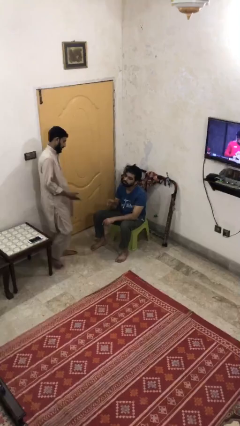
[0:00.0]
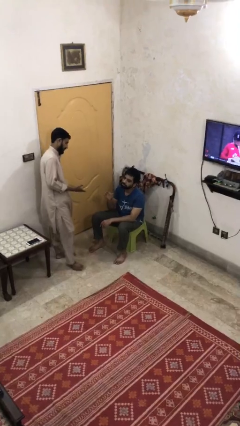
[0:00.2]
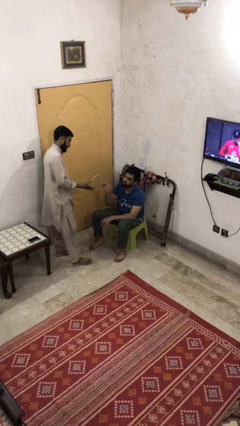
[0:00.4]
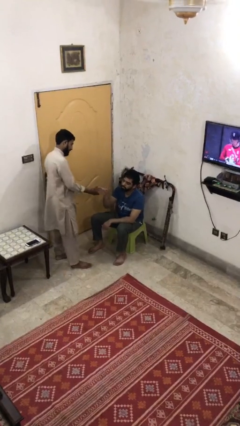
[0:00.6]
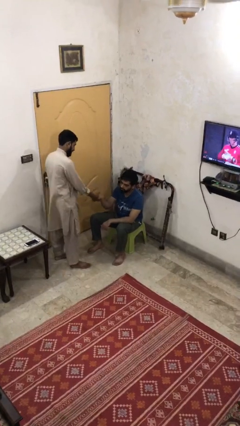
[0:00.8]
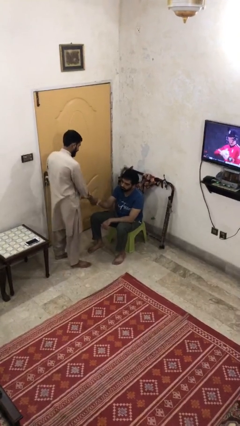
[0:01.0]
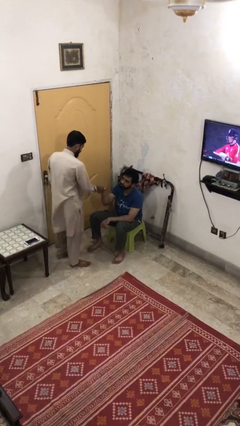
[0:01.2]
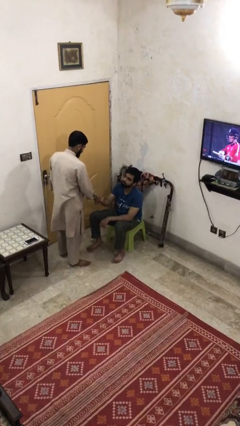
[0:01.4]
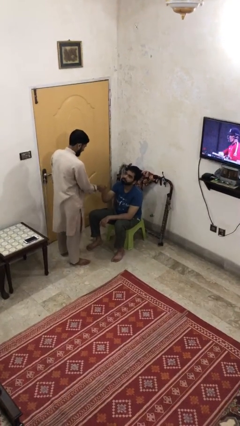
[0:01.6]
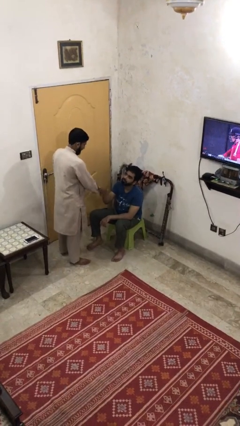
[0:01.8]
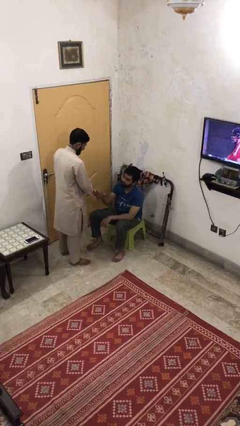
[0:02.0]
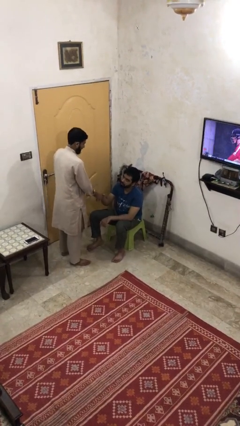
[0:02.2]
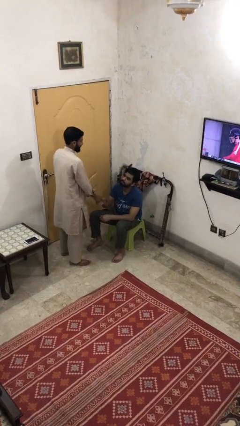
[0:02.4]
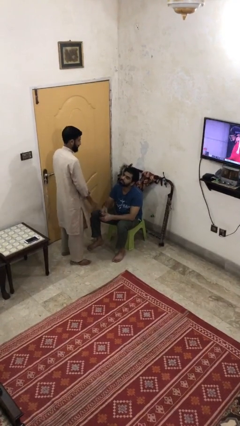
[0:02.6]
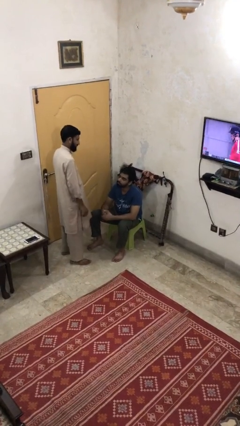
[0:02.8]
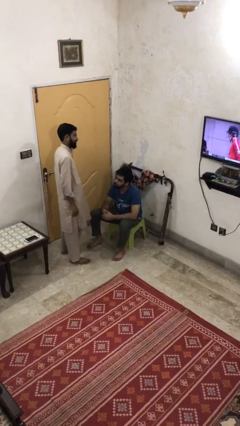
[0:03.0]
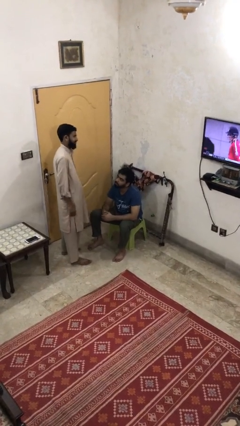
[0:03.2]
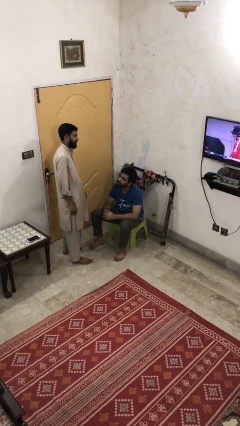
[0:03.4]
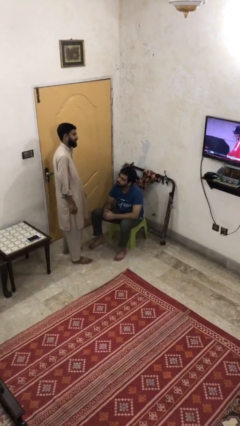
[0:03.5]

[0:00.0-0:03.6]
person shakes hand

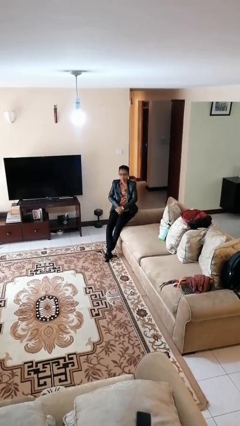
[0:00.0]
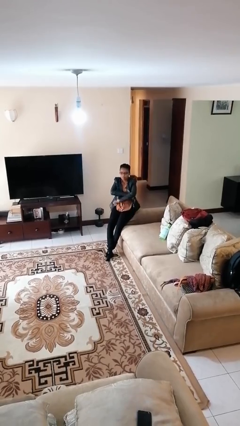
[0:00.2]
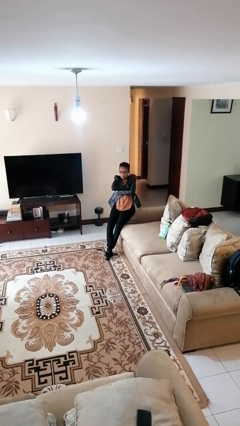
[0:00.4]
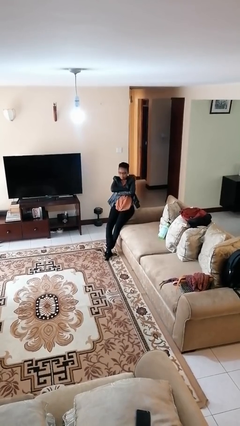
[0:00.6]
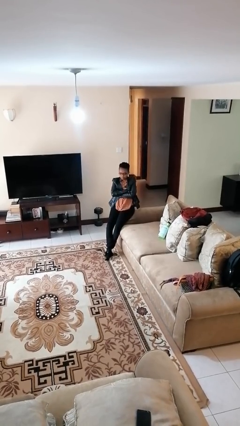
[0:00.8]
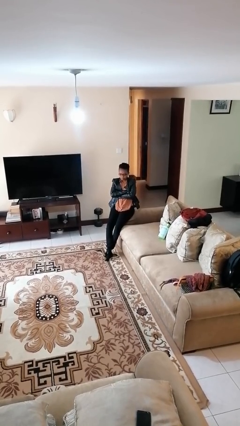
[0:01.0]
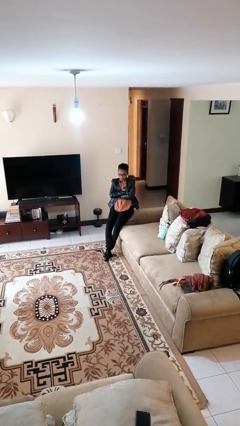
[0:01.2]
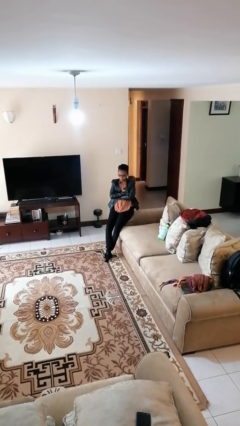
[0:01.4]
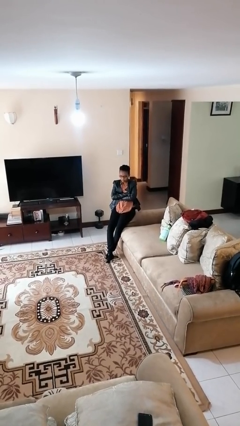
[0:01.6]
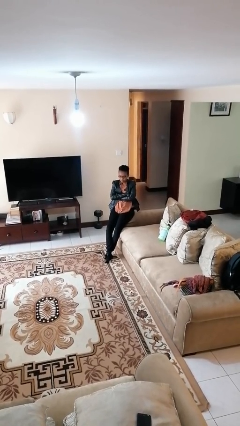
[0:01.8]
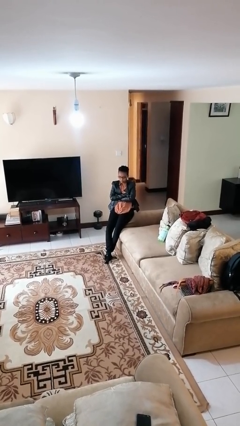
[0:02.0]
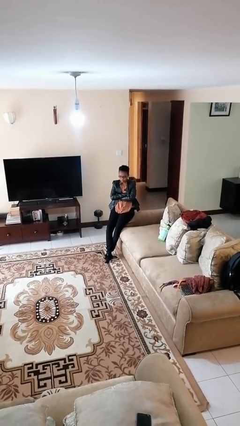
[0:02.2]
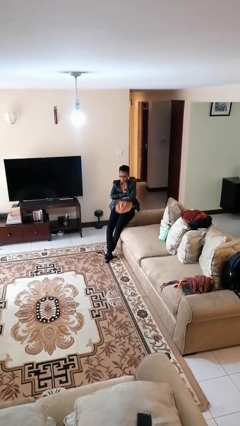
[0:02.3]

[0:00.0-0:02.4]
person crosses arms

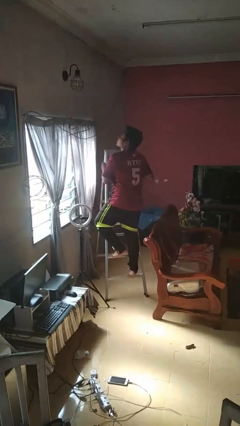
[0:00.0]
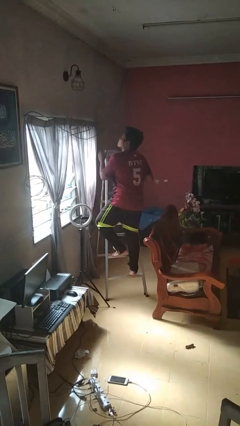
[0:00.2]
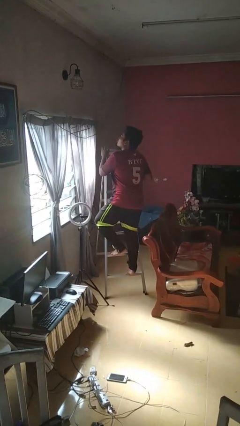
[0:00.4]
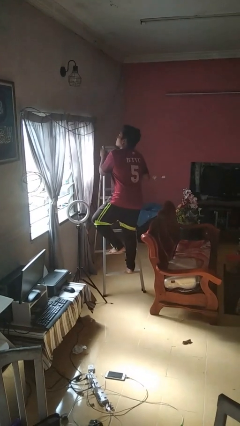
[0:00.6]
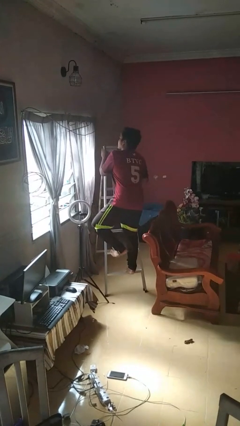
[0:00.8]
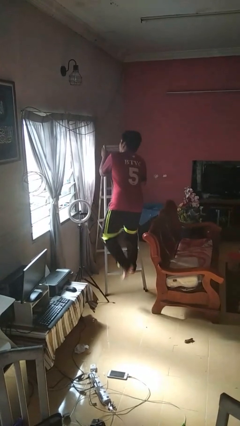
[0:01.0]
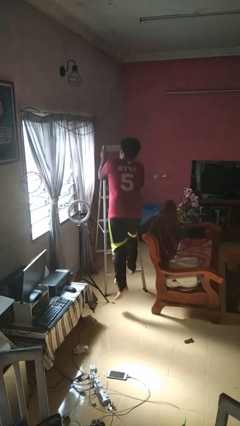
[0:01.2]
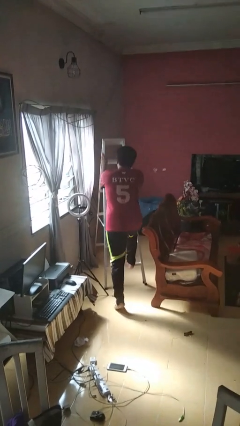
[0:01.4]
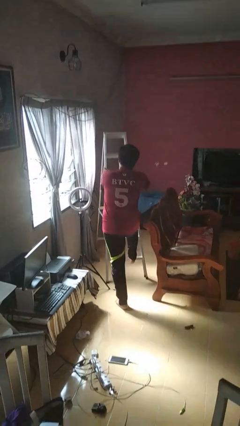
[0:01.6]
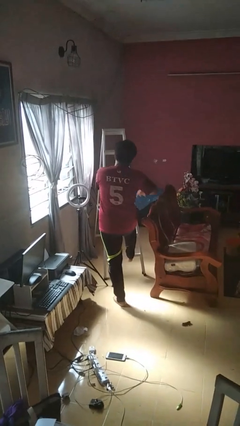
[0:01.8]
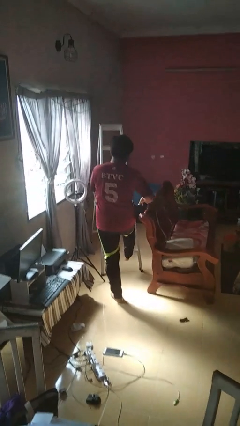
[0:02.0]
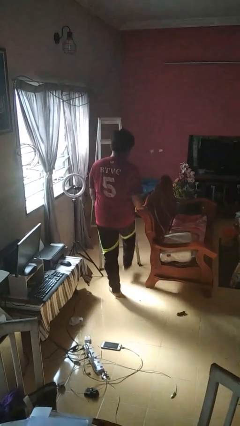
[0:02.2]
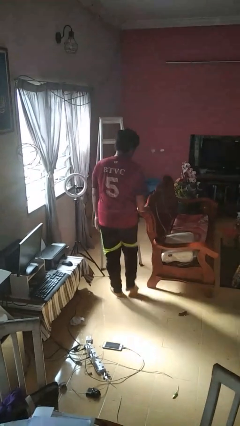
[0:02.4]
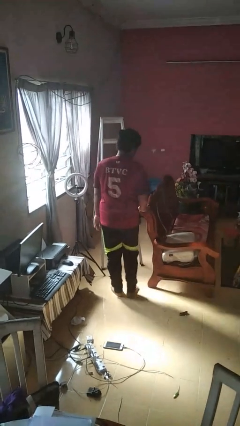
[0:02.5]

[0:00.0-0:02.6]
person climbs down ladder

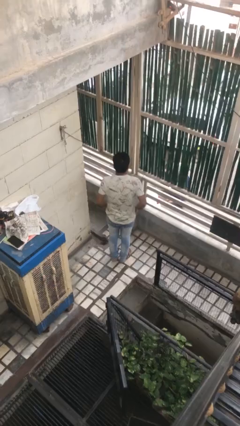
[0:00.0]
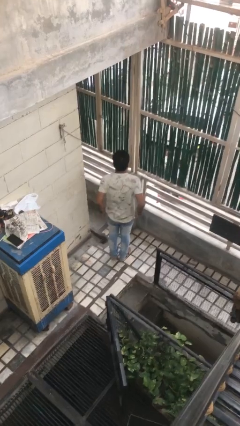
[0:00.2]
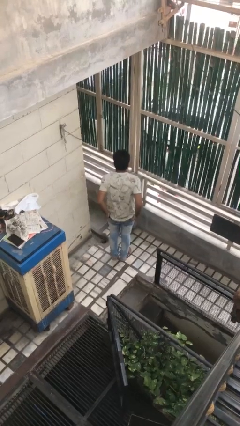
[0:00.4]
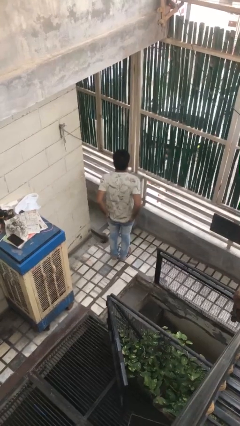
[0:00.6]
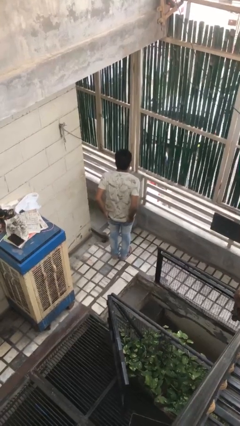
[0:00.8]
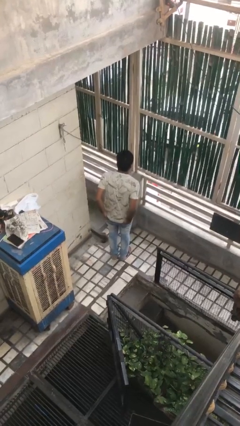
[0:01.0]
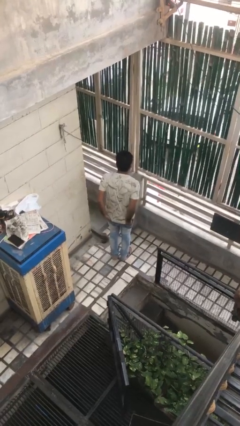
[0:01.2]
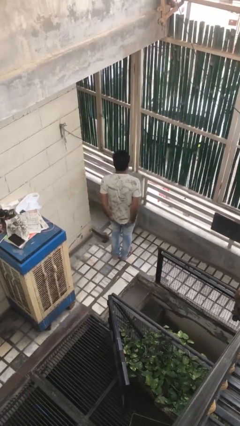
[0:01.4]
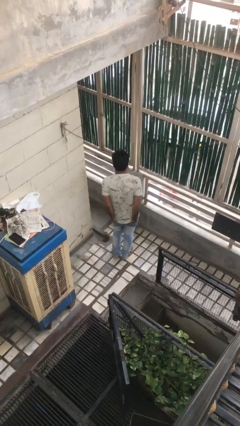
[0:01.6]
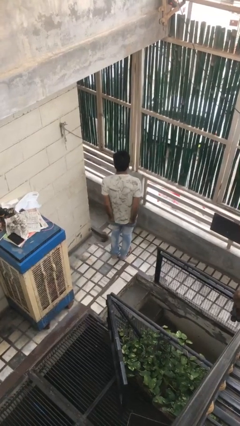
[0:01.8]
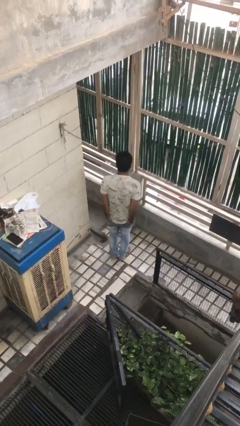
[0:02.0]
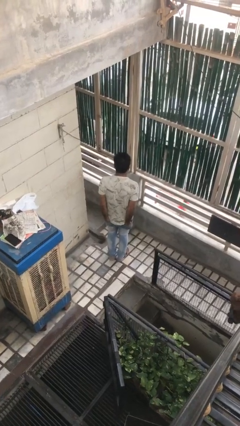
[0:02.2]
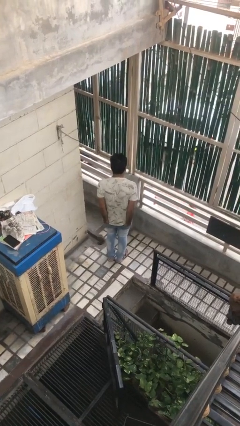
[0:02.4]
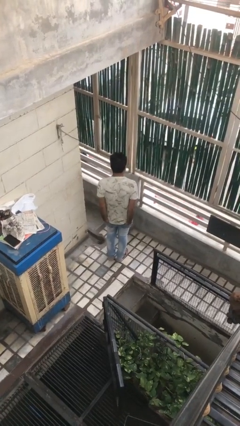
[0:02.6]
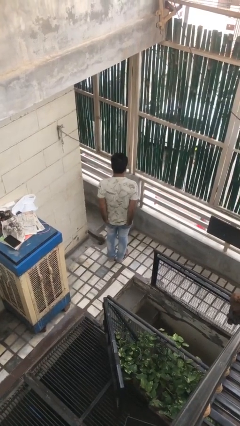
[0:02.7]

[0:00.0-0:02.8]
person puts hands in back pockets

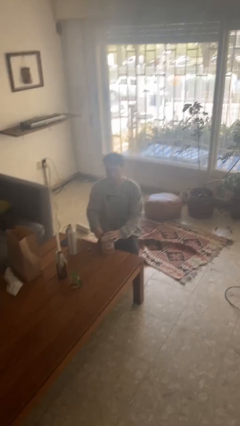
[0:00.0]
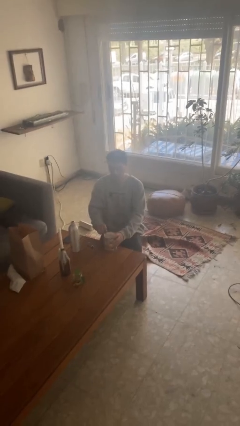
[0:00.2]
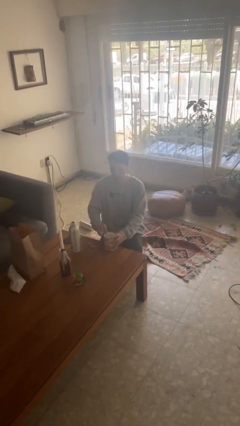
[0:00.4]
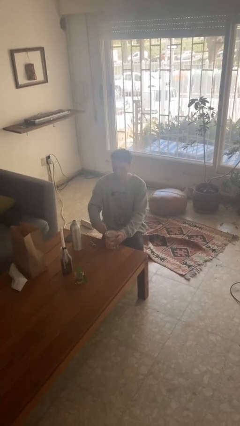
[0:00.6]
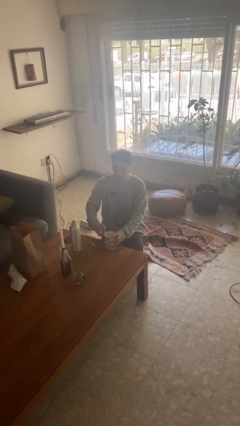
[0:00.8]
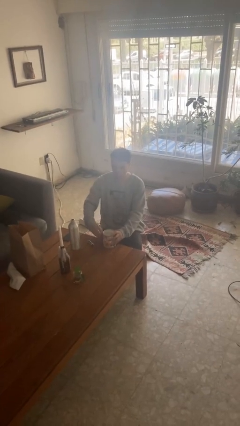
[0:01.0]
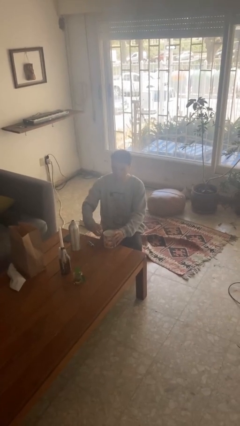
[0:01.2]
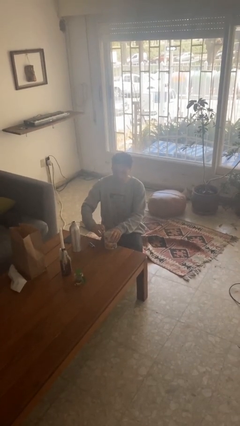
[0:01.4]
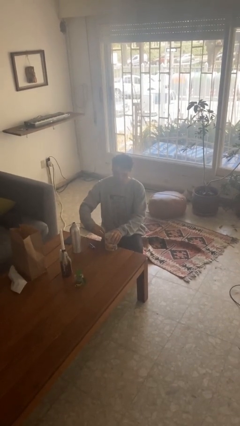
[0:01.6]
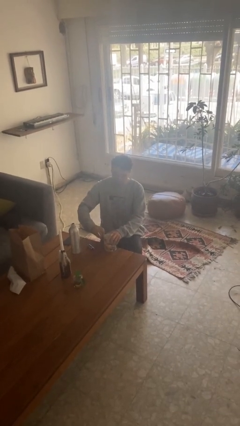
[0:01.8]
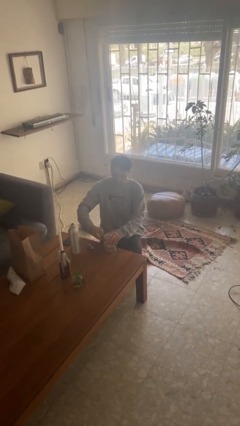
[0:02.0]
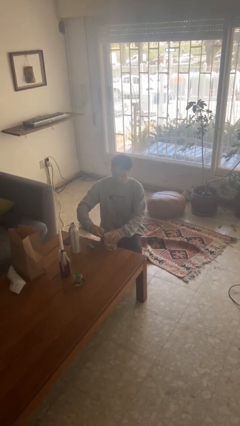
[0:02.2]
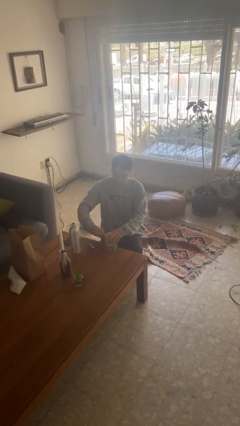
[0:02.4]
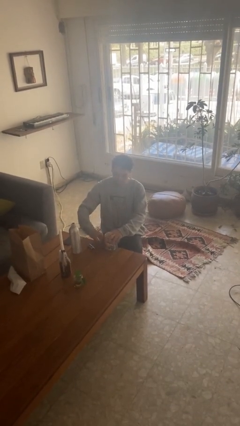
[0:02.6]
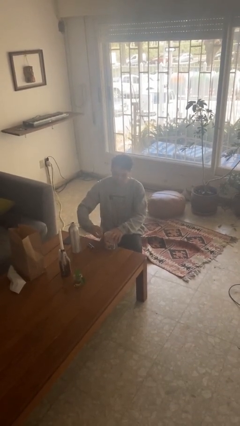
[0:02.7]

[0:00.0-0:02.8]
person opens can with can opener

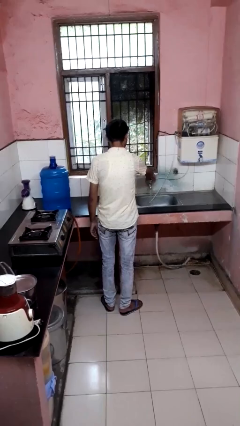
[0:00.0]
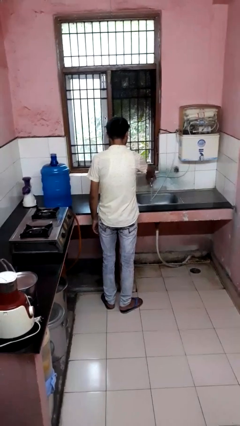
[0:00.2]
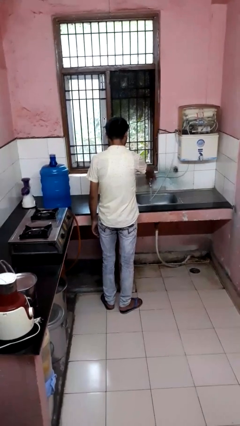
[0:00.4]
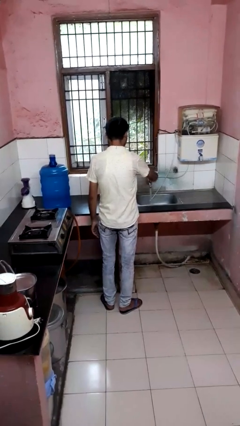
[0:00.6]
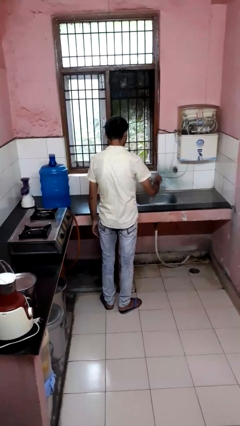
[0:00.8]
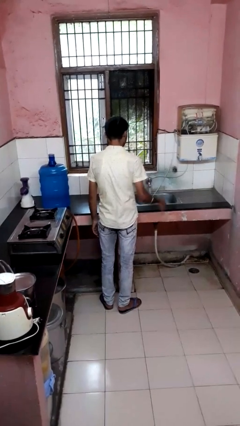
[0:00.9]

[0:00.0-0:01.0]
person turns on faucet

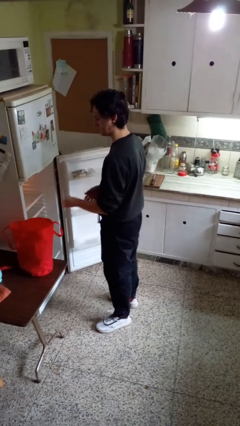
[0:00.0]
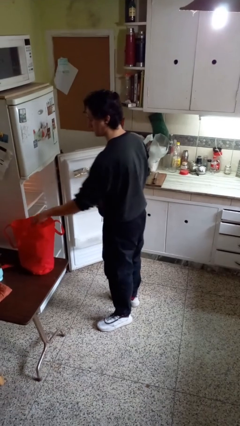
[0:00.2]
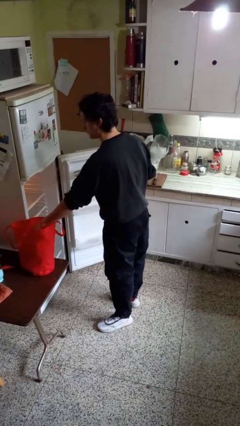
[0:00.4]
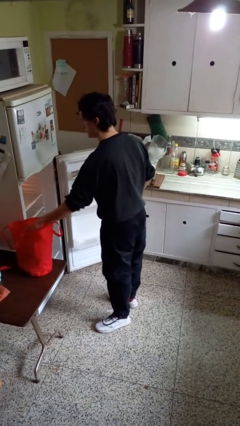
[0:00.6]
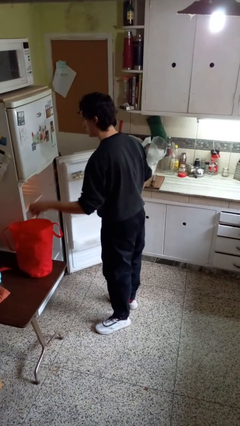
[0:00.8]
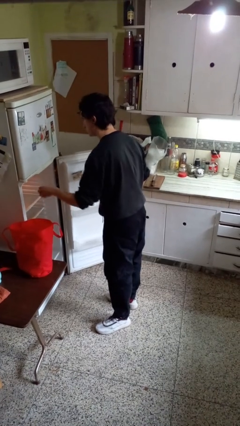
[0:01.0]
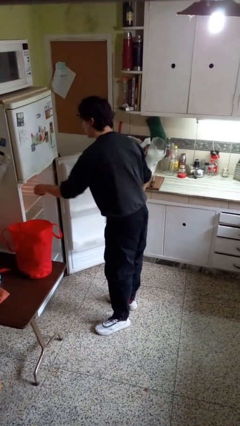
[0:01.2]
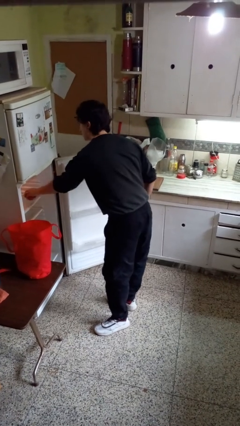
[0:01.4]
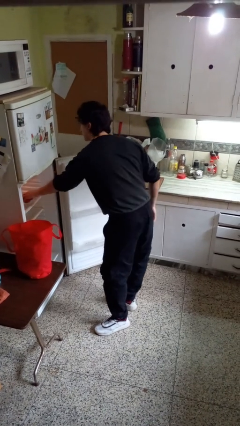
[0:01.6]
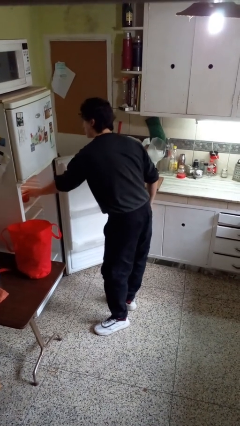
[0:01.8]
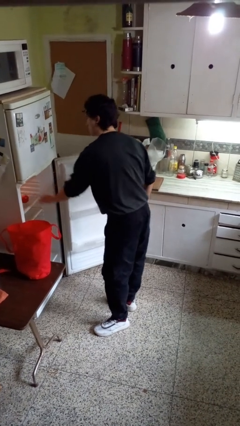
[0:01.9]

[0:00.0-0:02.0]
person loads groceries into refrigerator
